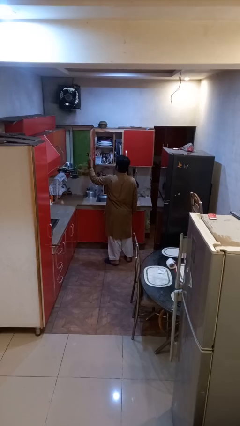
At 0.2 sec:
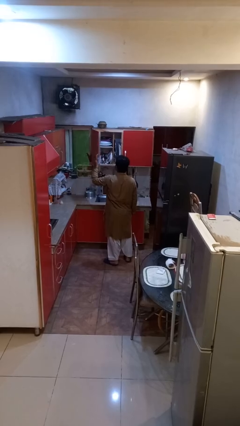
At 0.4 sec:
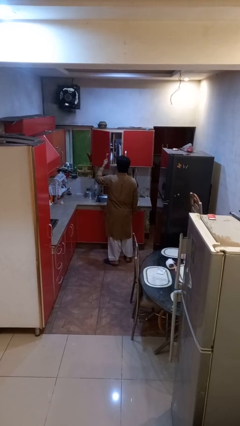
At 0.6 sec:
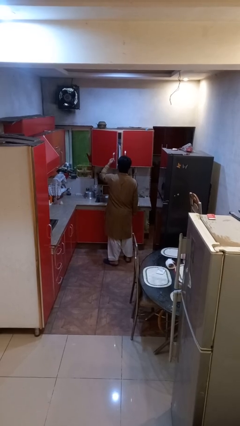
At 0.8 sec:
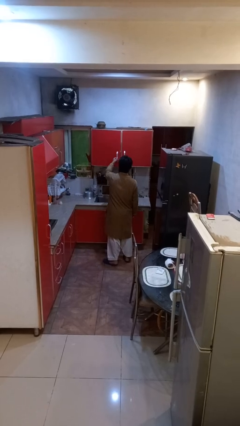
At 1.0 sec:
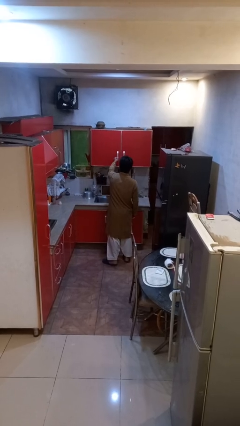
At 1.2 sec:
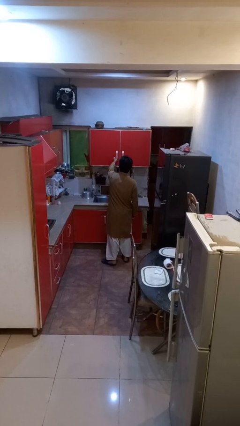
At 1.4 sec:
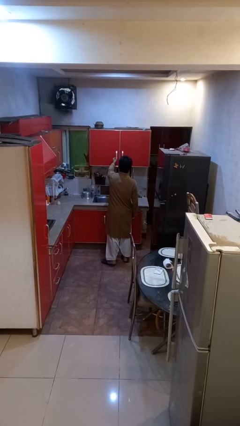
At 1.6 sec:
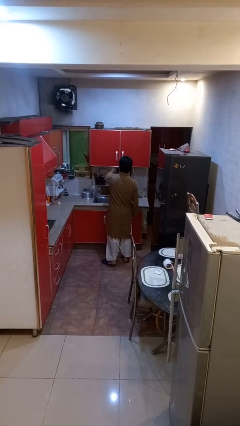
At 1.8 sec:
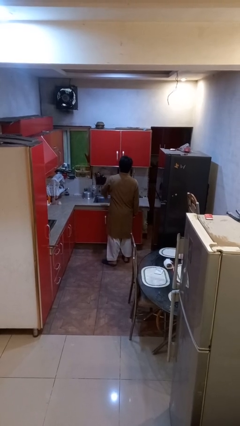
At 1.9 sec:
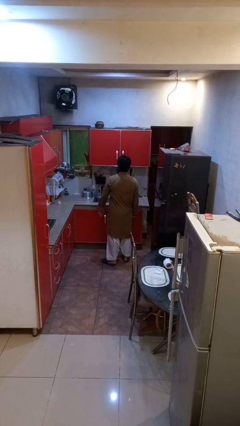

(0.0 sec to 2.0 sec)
person closes cabinet

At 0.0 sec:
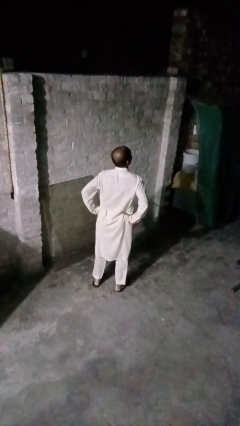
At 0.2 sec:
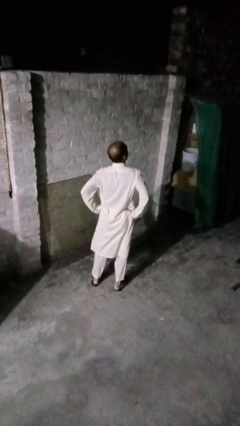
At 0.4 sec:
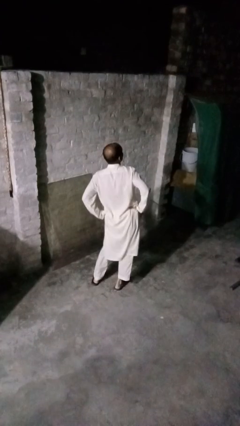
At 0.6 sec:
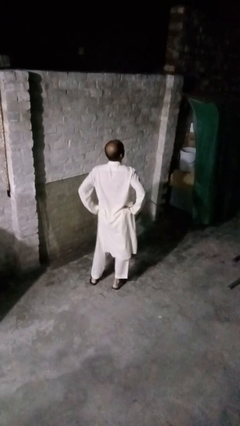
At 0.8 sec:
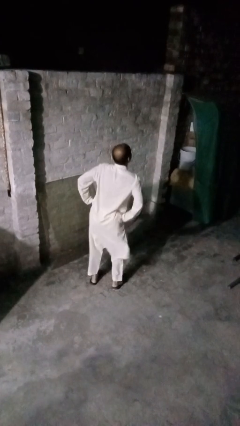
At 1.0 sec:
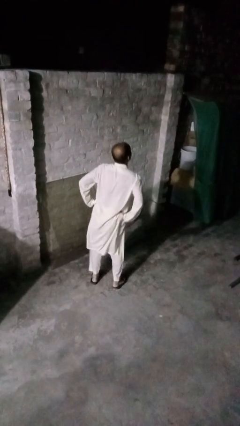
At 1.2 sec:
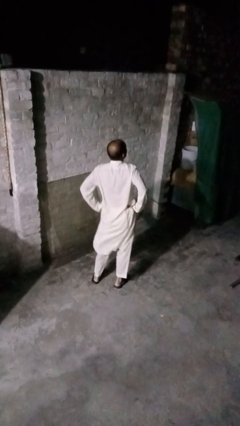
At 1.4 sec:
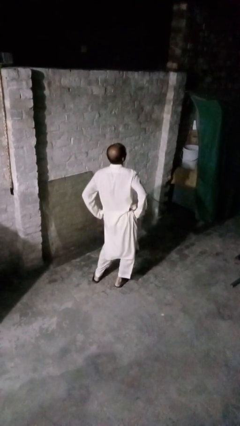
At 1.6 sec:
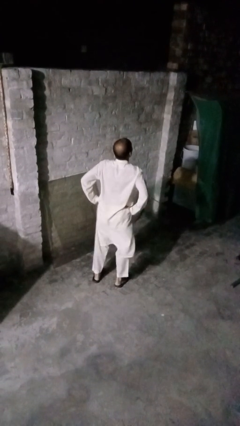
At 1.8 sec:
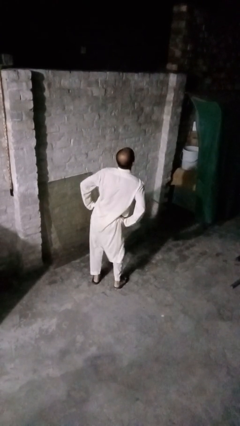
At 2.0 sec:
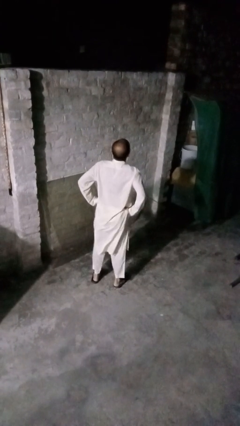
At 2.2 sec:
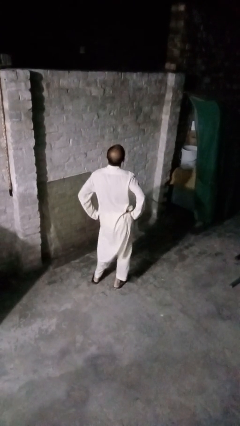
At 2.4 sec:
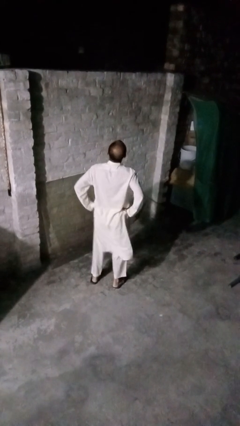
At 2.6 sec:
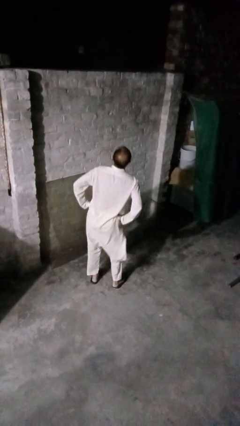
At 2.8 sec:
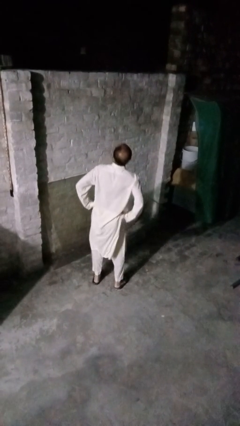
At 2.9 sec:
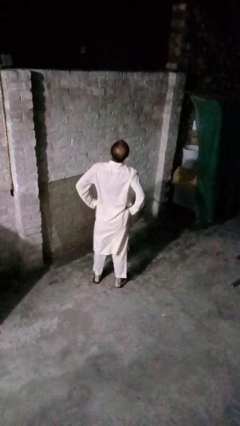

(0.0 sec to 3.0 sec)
person wiggles hips

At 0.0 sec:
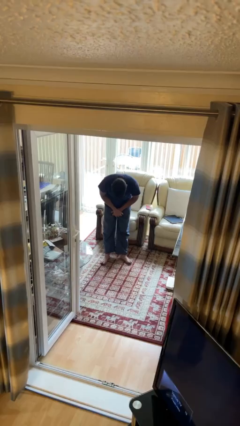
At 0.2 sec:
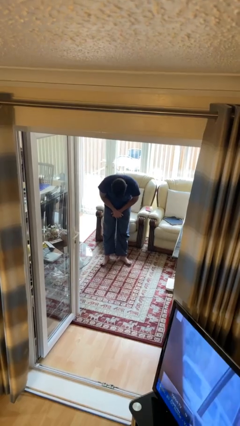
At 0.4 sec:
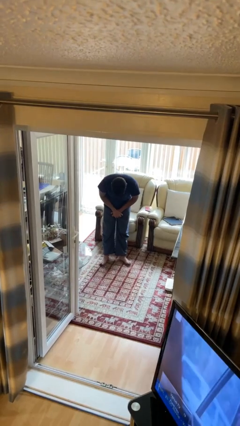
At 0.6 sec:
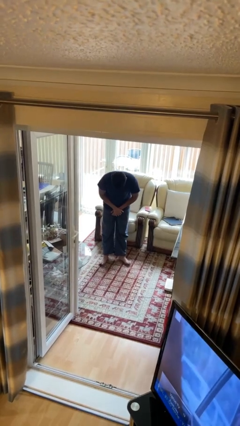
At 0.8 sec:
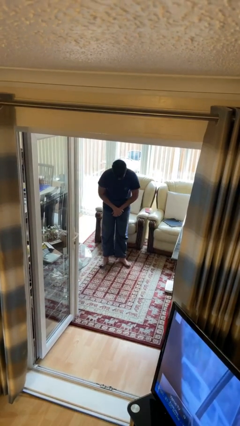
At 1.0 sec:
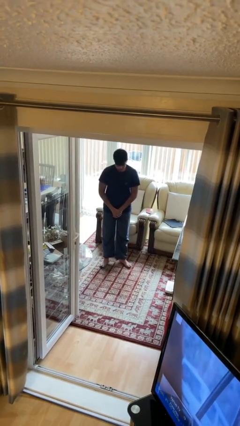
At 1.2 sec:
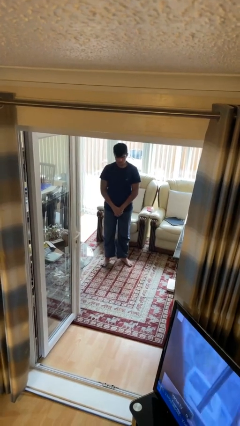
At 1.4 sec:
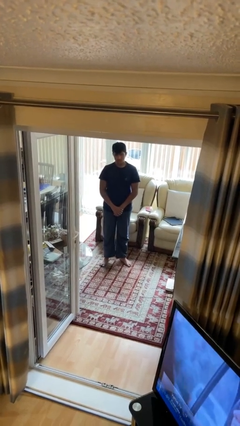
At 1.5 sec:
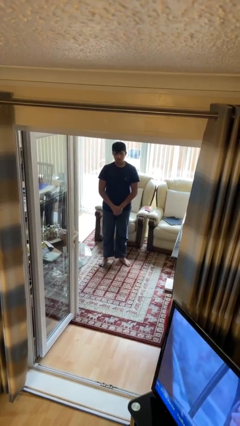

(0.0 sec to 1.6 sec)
person bows

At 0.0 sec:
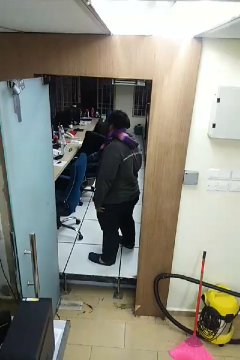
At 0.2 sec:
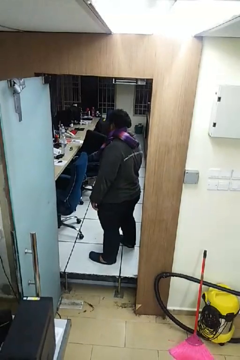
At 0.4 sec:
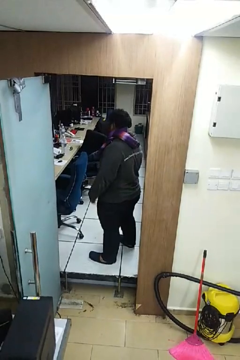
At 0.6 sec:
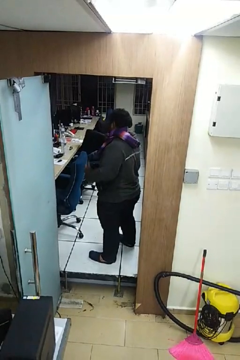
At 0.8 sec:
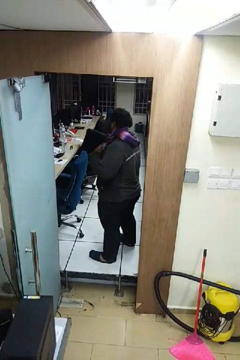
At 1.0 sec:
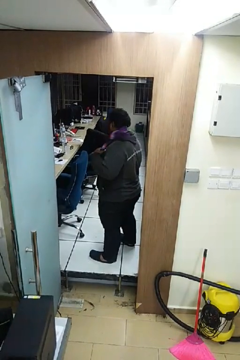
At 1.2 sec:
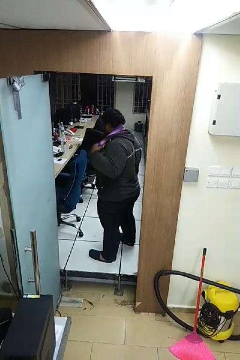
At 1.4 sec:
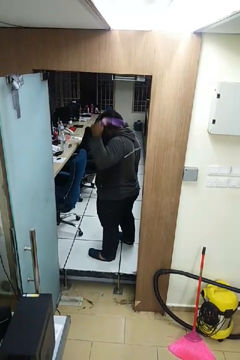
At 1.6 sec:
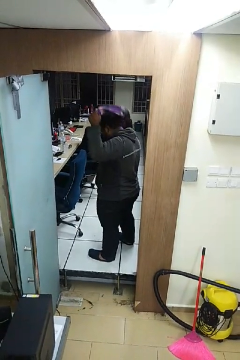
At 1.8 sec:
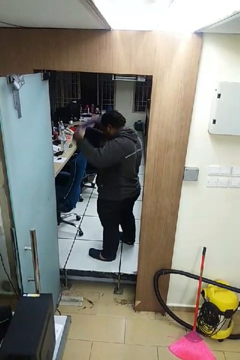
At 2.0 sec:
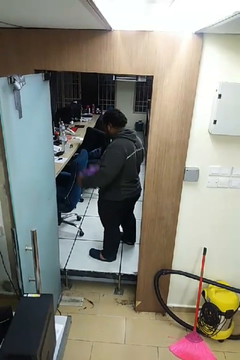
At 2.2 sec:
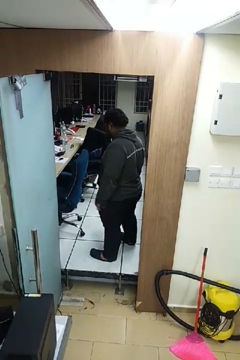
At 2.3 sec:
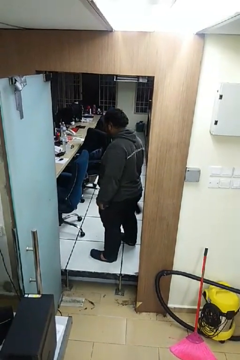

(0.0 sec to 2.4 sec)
person takes off scarf

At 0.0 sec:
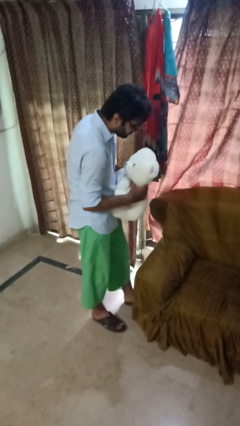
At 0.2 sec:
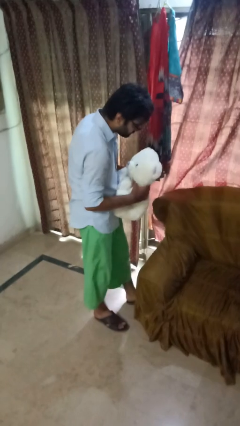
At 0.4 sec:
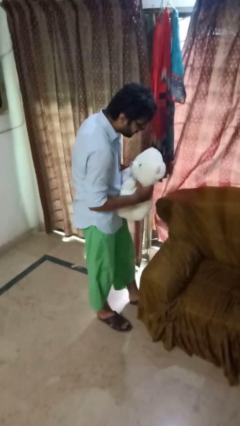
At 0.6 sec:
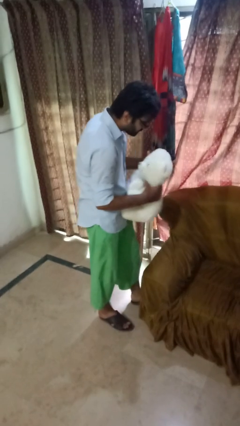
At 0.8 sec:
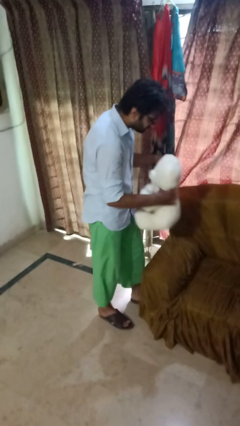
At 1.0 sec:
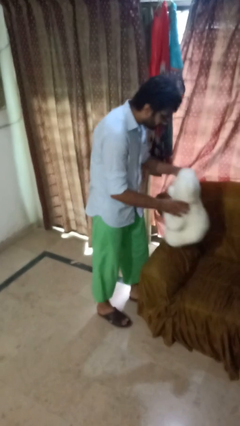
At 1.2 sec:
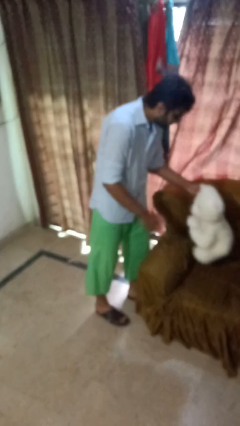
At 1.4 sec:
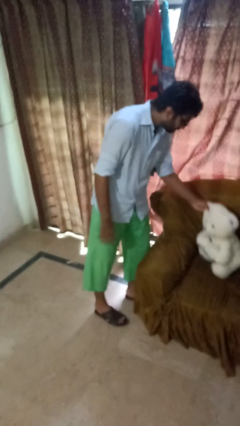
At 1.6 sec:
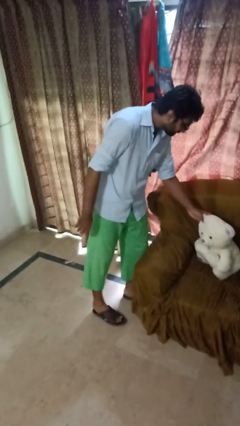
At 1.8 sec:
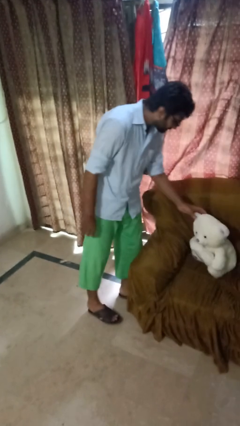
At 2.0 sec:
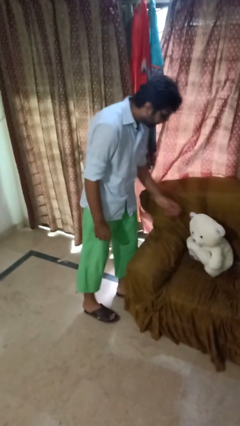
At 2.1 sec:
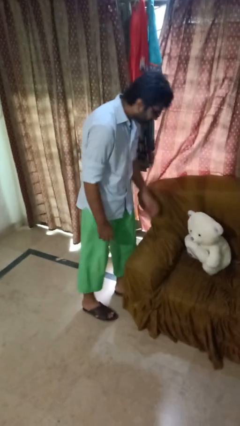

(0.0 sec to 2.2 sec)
person puts down object on couch

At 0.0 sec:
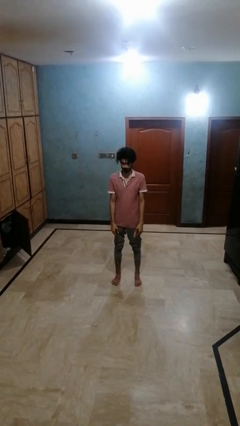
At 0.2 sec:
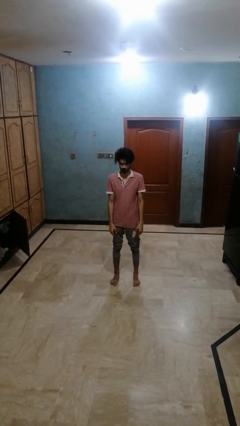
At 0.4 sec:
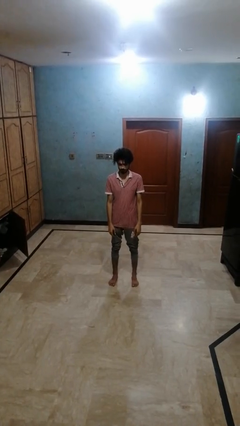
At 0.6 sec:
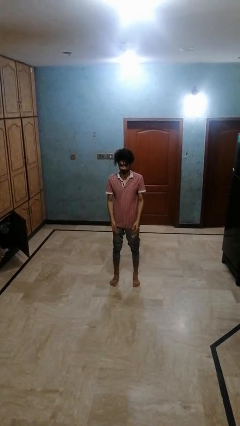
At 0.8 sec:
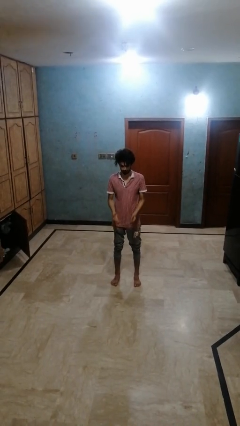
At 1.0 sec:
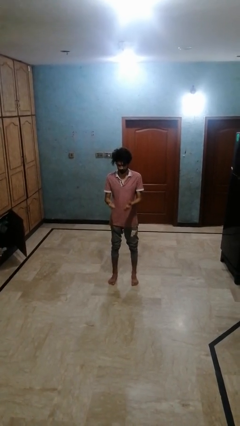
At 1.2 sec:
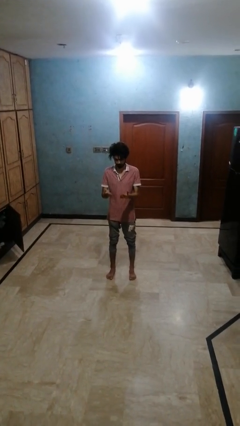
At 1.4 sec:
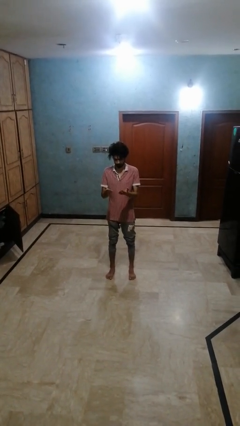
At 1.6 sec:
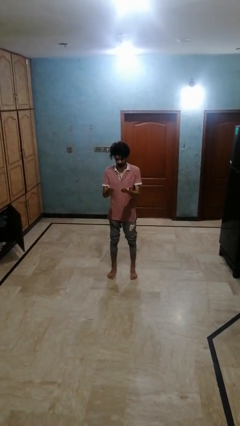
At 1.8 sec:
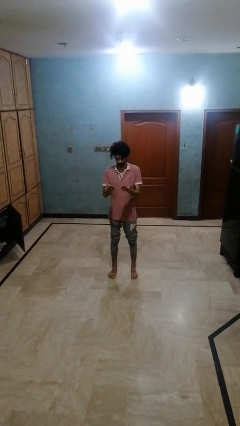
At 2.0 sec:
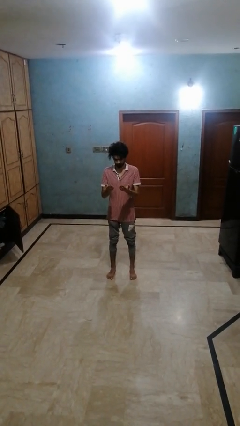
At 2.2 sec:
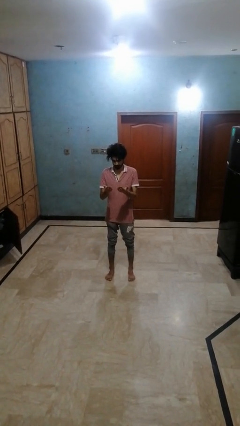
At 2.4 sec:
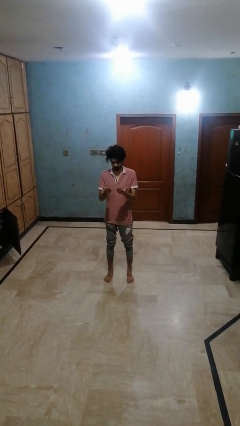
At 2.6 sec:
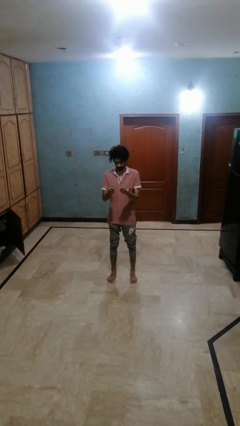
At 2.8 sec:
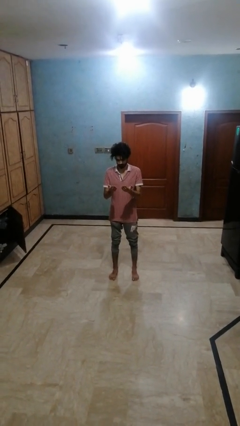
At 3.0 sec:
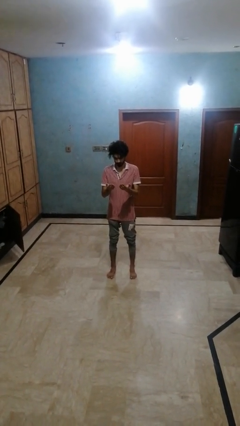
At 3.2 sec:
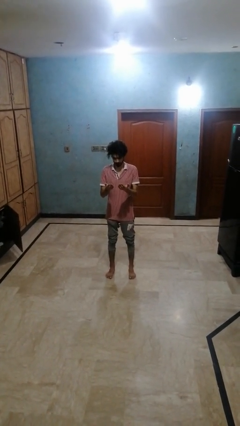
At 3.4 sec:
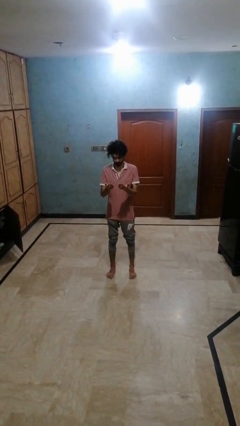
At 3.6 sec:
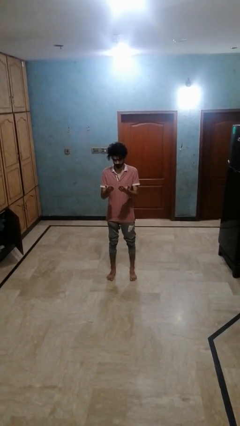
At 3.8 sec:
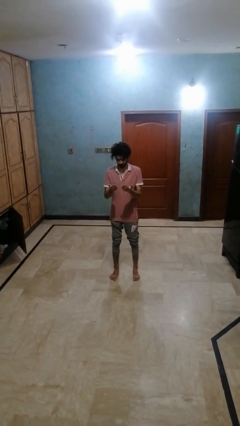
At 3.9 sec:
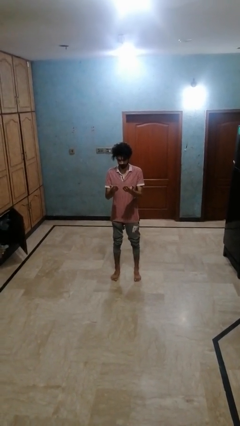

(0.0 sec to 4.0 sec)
person prays

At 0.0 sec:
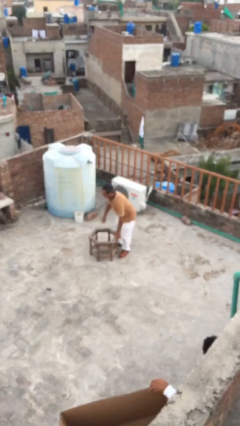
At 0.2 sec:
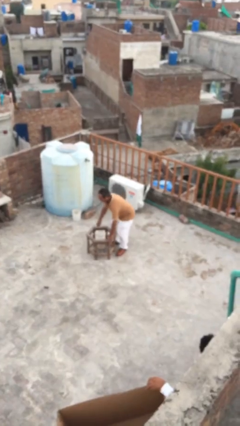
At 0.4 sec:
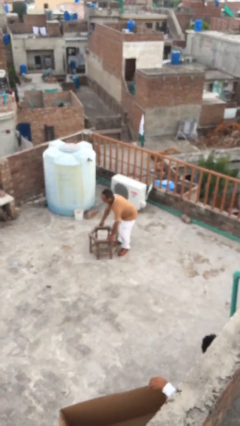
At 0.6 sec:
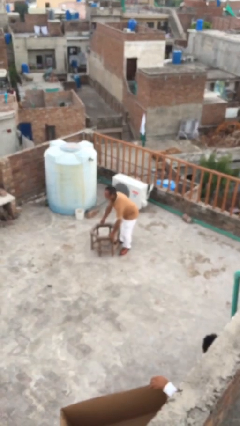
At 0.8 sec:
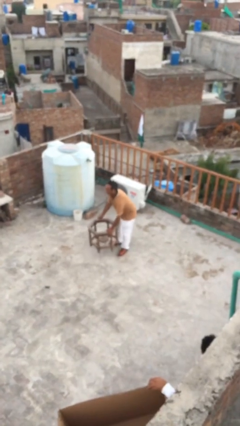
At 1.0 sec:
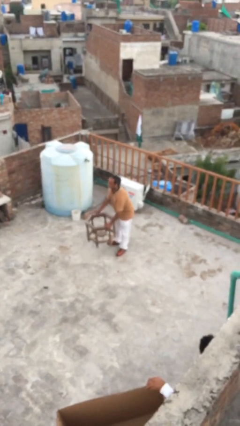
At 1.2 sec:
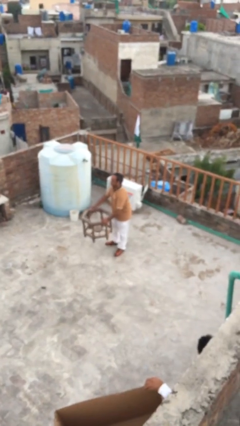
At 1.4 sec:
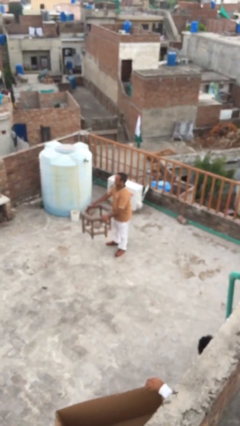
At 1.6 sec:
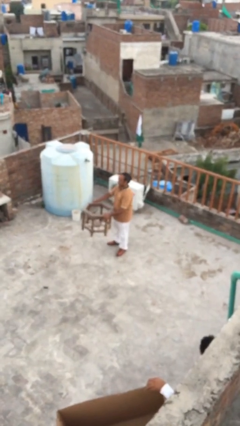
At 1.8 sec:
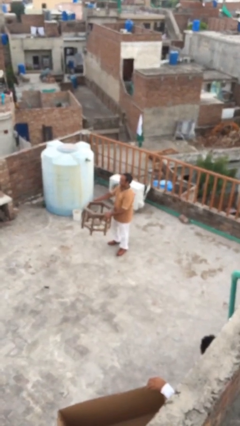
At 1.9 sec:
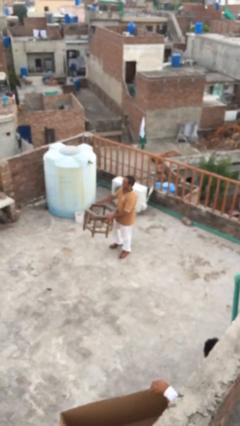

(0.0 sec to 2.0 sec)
person picks up object from floor
